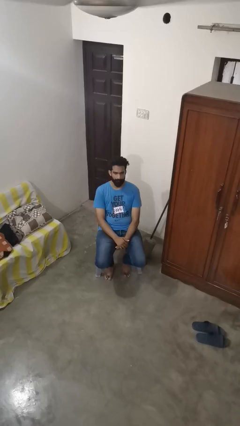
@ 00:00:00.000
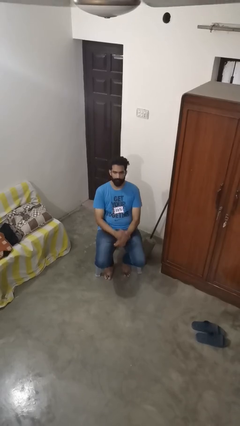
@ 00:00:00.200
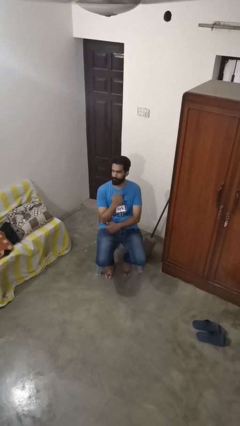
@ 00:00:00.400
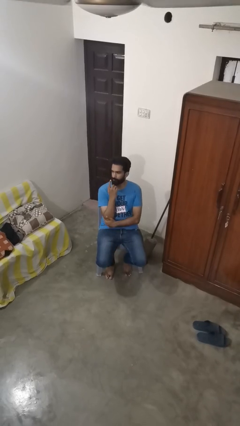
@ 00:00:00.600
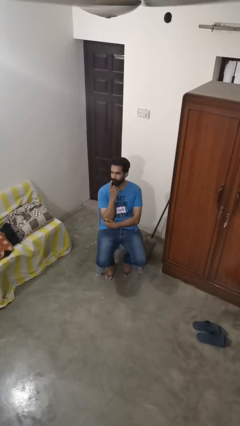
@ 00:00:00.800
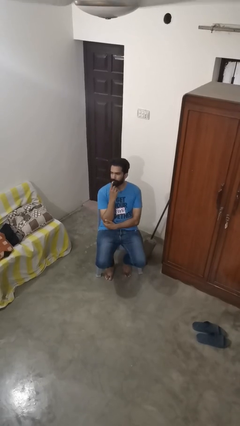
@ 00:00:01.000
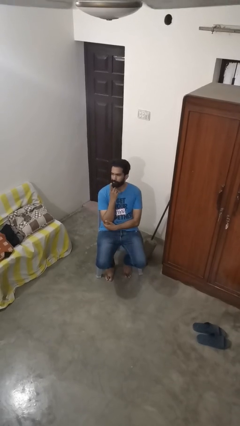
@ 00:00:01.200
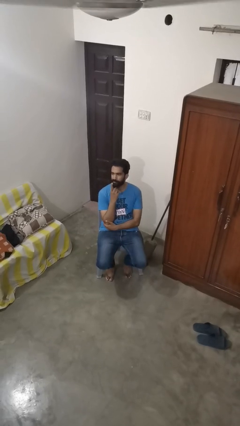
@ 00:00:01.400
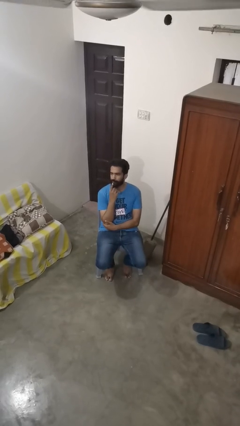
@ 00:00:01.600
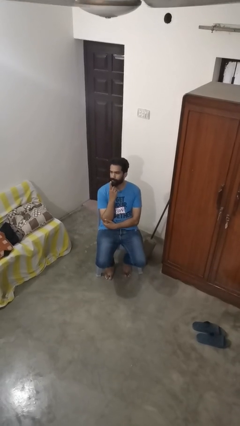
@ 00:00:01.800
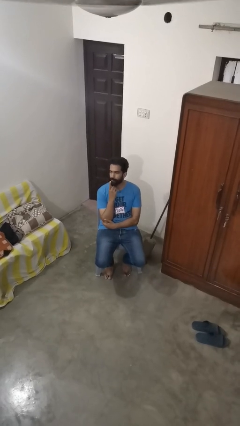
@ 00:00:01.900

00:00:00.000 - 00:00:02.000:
person strokes chin

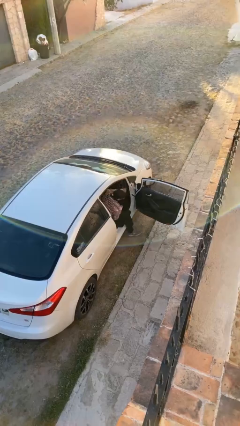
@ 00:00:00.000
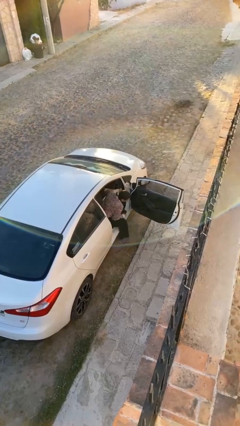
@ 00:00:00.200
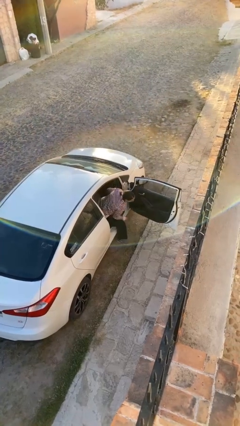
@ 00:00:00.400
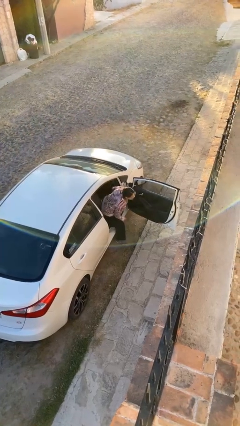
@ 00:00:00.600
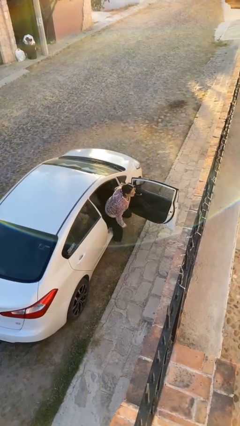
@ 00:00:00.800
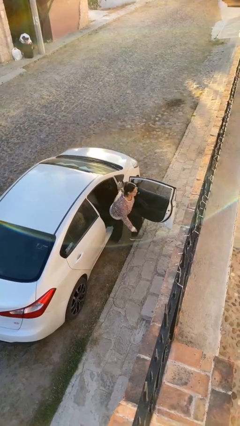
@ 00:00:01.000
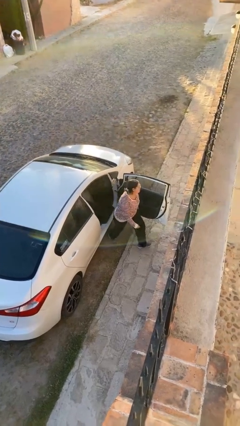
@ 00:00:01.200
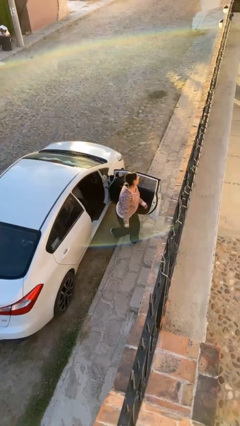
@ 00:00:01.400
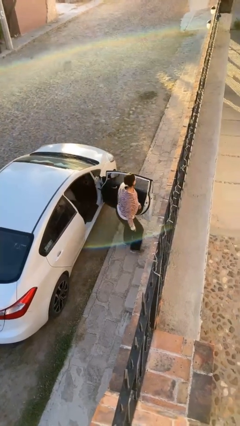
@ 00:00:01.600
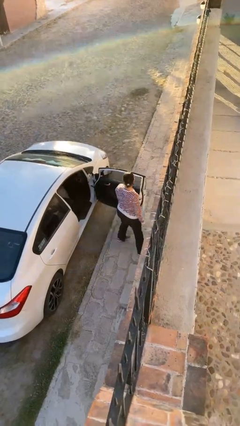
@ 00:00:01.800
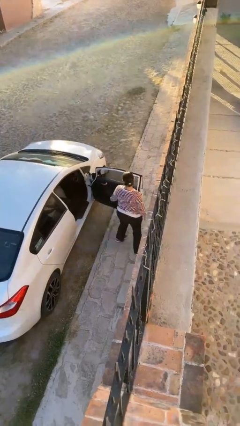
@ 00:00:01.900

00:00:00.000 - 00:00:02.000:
person exits car

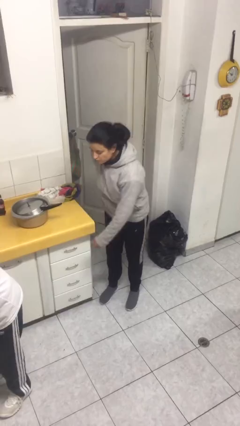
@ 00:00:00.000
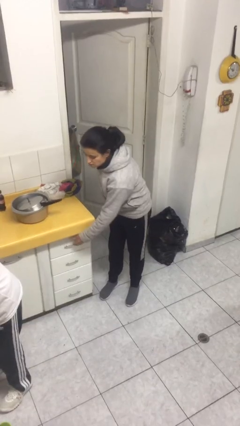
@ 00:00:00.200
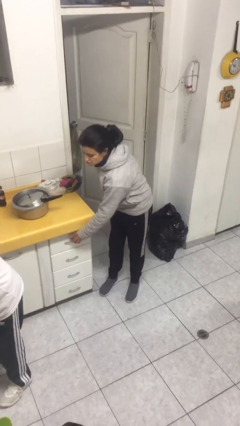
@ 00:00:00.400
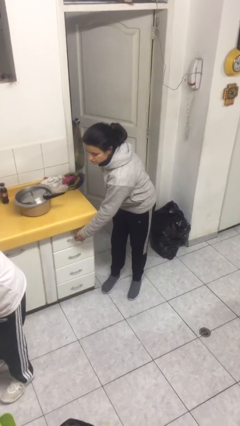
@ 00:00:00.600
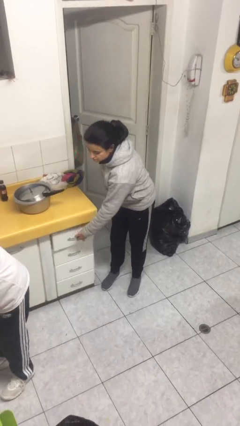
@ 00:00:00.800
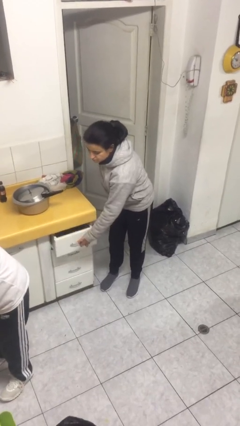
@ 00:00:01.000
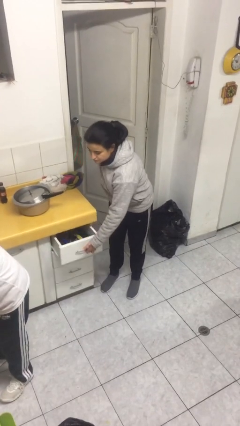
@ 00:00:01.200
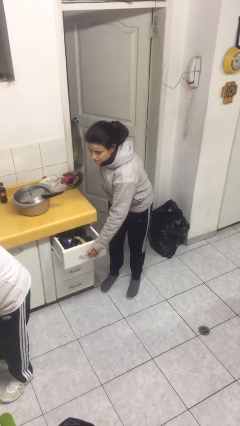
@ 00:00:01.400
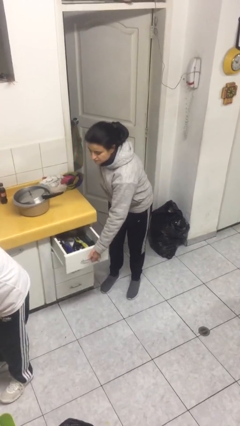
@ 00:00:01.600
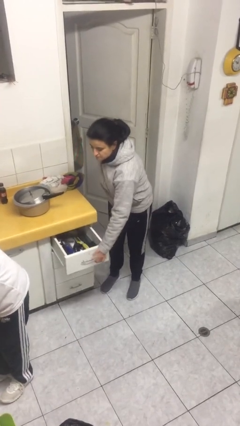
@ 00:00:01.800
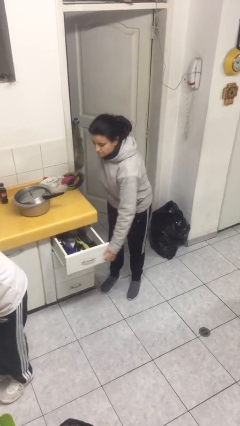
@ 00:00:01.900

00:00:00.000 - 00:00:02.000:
person opens kitchen drawer

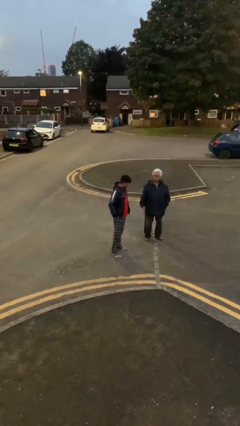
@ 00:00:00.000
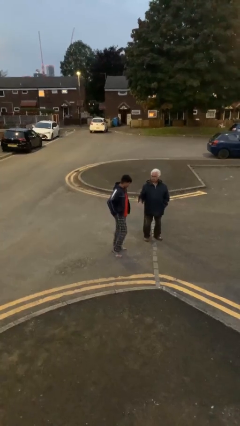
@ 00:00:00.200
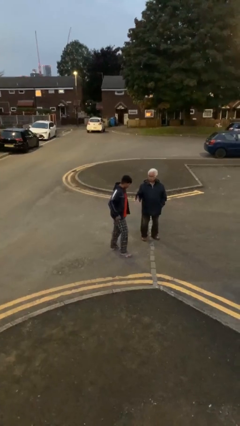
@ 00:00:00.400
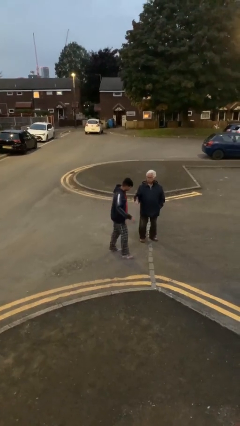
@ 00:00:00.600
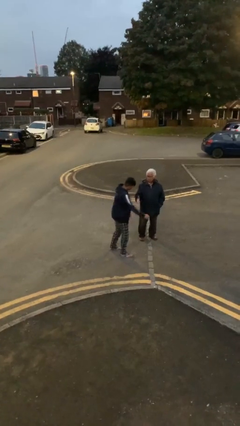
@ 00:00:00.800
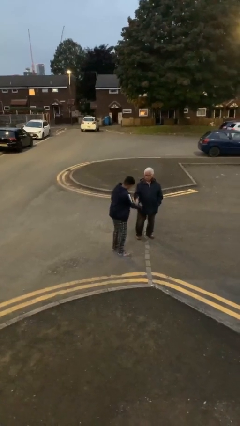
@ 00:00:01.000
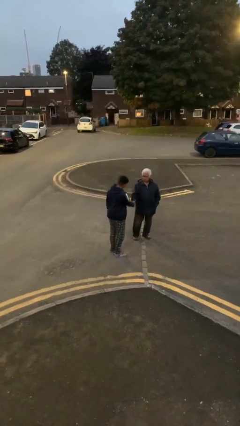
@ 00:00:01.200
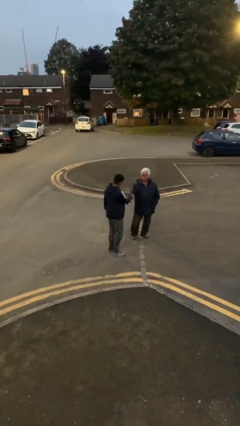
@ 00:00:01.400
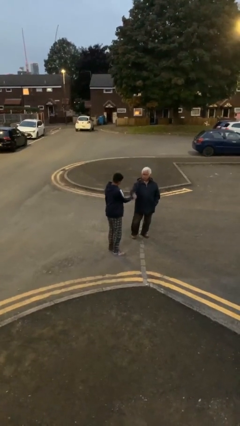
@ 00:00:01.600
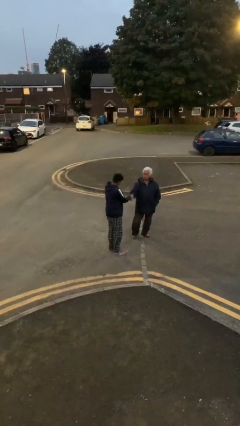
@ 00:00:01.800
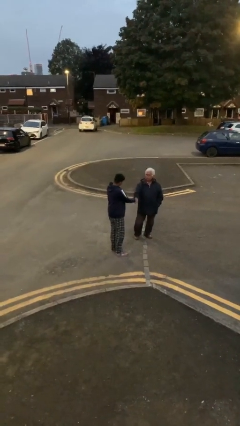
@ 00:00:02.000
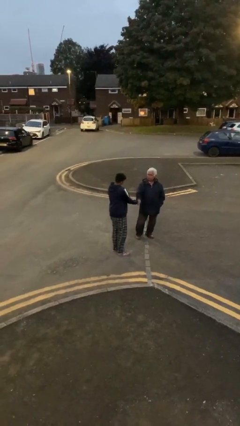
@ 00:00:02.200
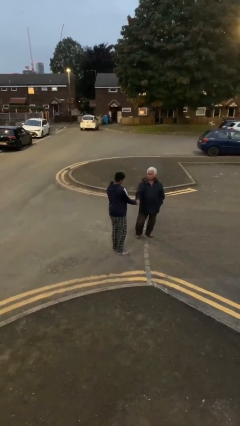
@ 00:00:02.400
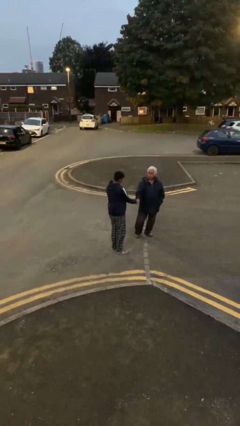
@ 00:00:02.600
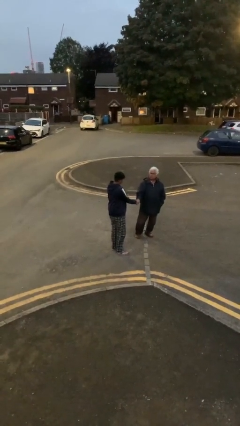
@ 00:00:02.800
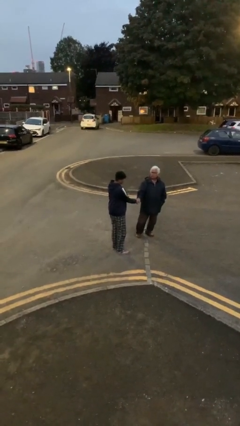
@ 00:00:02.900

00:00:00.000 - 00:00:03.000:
person shakes hand

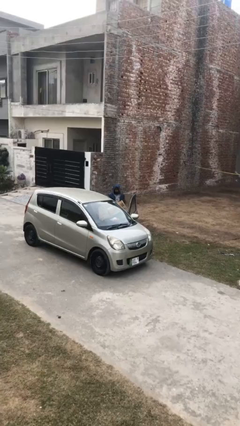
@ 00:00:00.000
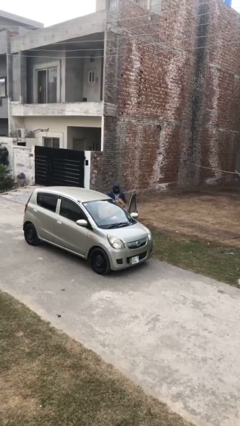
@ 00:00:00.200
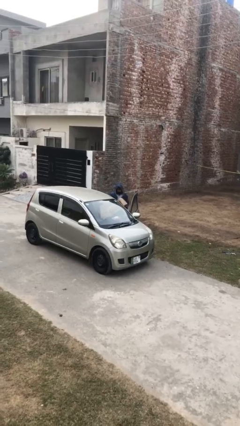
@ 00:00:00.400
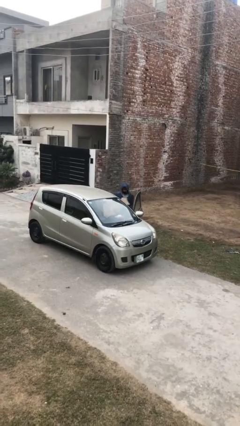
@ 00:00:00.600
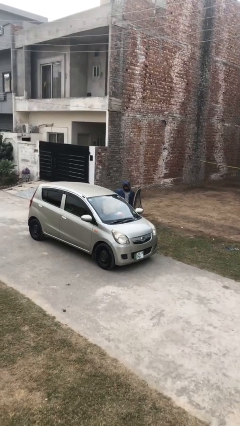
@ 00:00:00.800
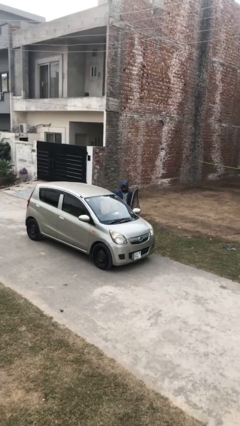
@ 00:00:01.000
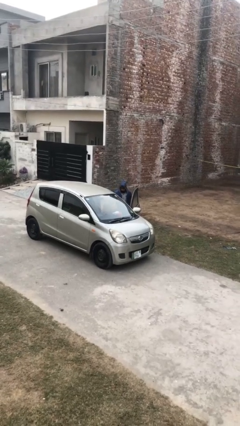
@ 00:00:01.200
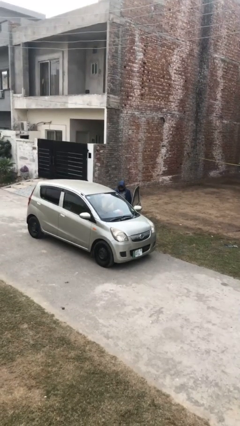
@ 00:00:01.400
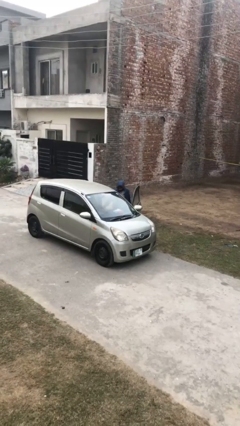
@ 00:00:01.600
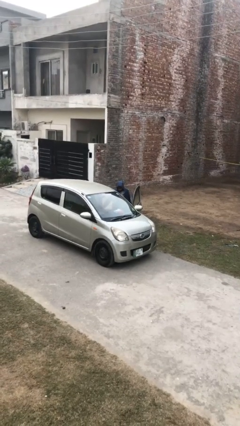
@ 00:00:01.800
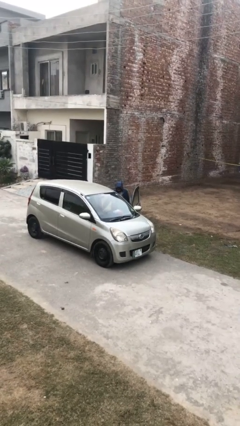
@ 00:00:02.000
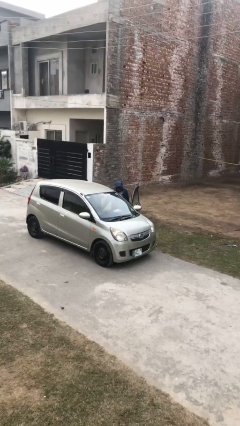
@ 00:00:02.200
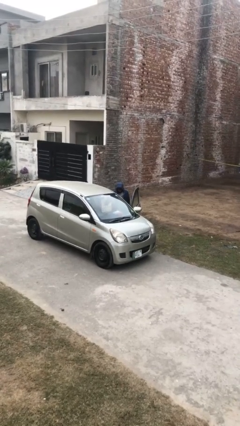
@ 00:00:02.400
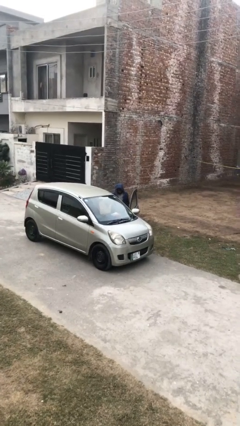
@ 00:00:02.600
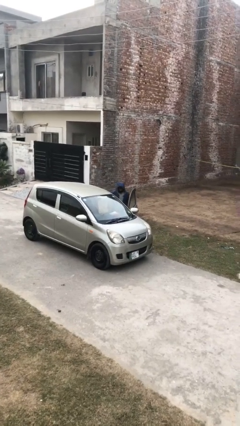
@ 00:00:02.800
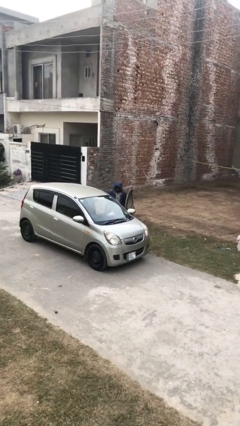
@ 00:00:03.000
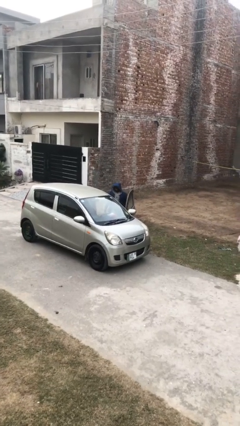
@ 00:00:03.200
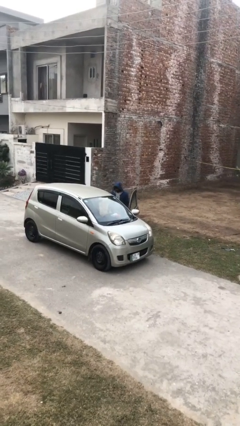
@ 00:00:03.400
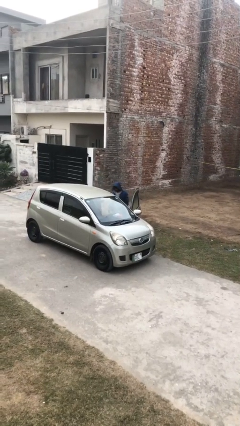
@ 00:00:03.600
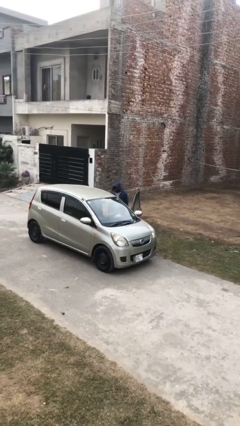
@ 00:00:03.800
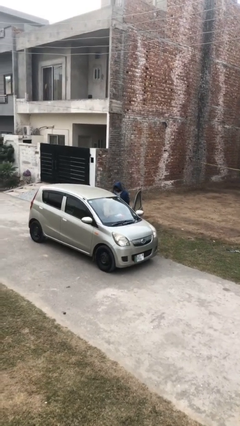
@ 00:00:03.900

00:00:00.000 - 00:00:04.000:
person loads car

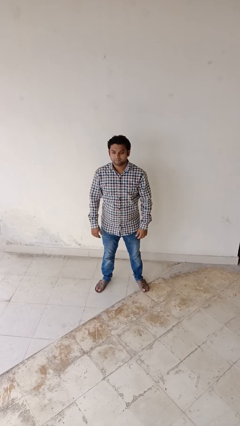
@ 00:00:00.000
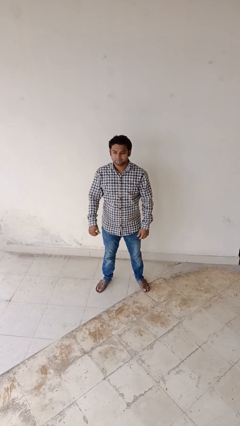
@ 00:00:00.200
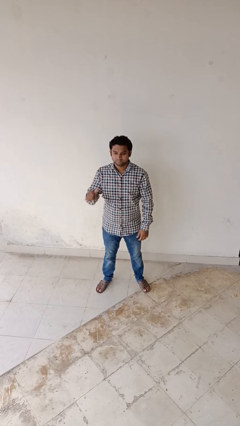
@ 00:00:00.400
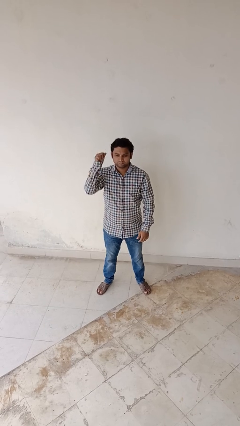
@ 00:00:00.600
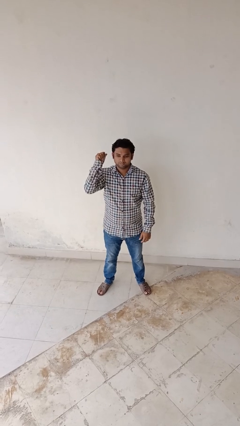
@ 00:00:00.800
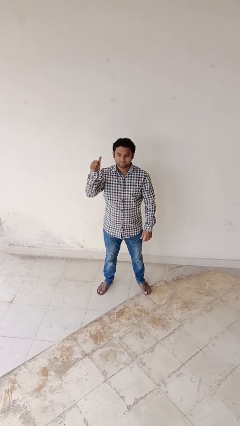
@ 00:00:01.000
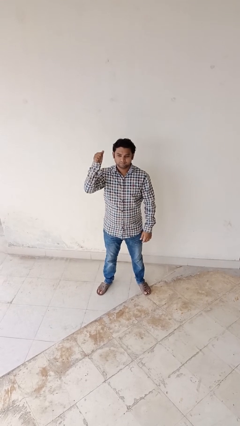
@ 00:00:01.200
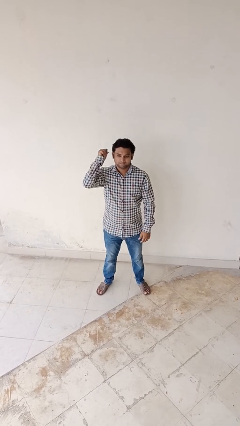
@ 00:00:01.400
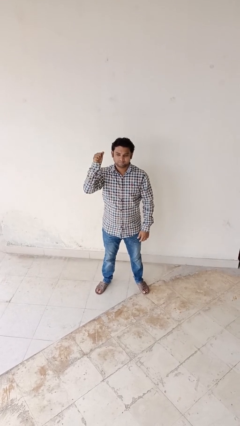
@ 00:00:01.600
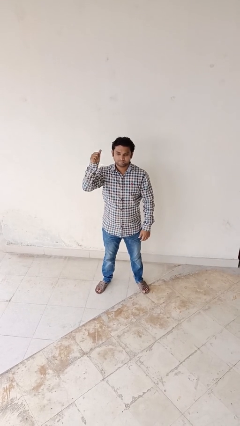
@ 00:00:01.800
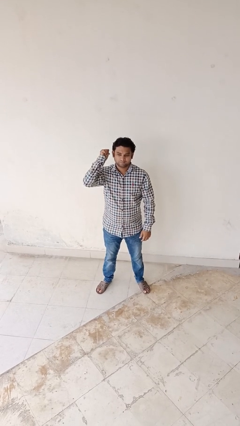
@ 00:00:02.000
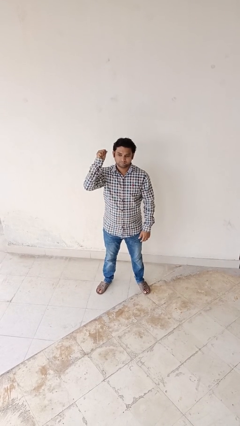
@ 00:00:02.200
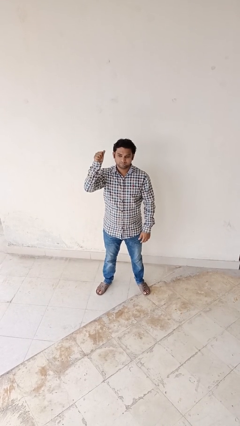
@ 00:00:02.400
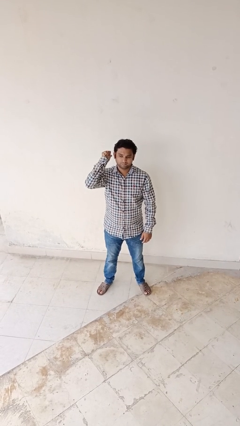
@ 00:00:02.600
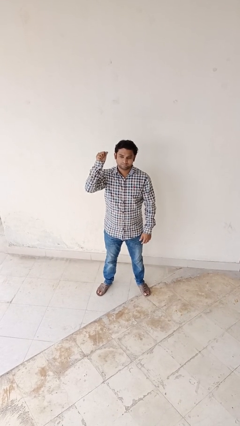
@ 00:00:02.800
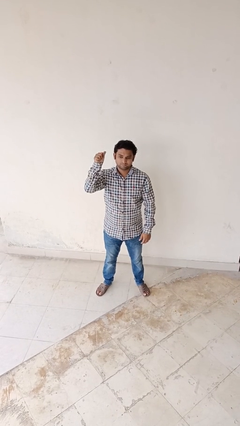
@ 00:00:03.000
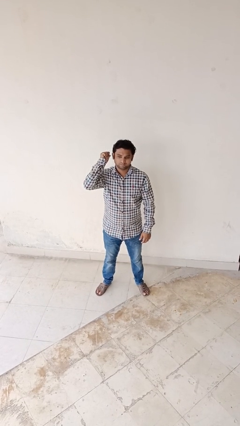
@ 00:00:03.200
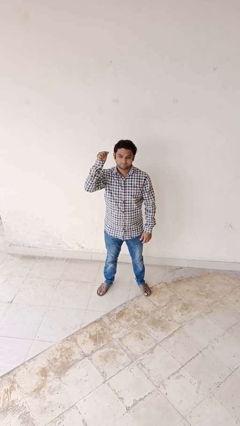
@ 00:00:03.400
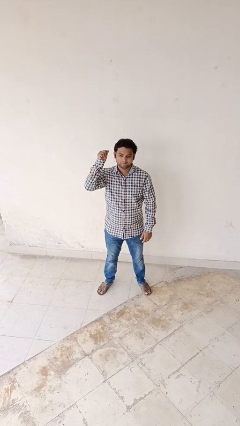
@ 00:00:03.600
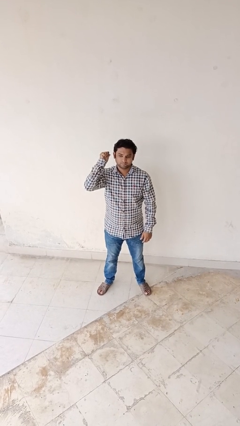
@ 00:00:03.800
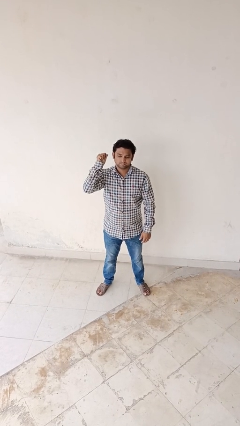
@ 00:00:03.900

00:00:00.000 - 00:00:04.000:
person gestures behind me

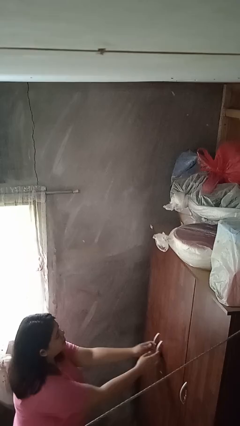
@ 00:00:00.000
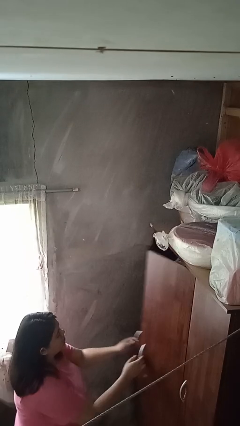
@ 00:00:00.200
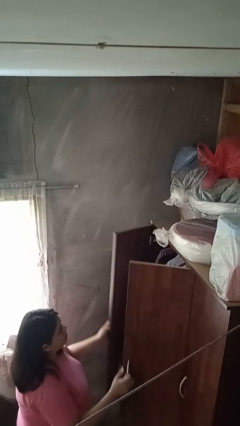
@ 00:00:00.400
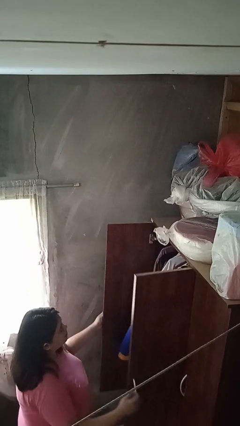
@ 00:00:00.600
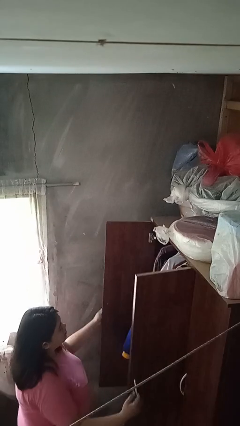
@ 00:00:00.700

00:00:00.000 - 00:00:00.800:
person opens closet door
